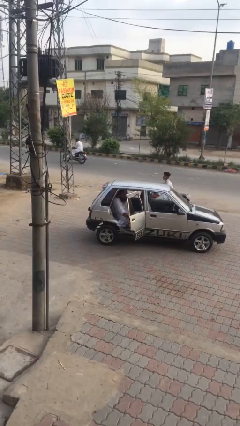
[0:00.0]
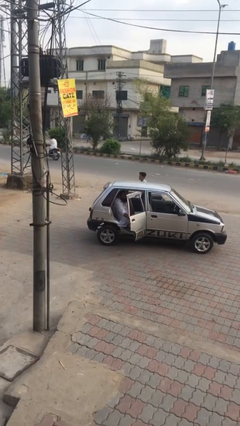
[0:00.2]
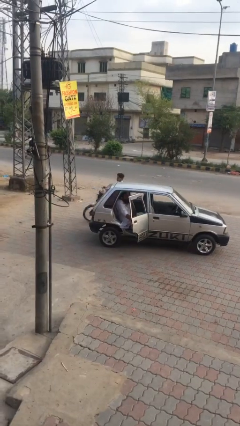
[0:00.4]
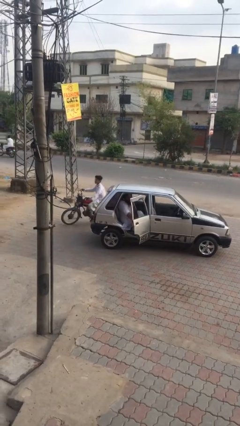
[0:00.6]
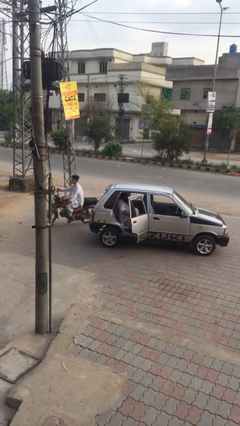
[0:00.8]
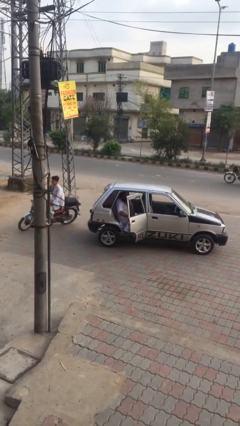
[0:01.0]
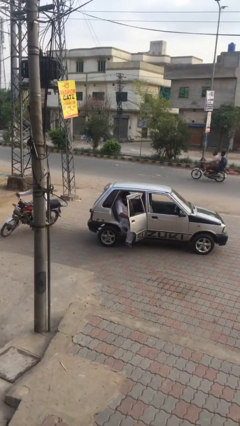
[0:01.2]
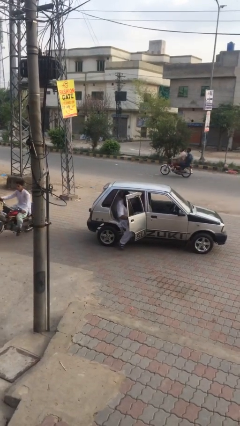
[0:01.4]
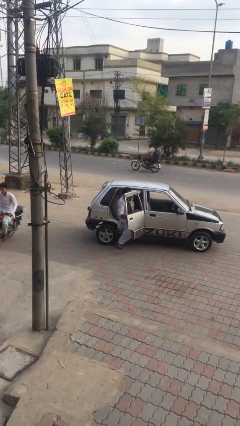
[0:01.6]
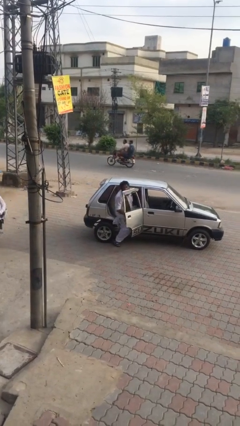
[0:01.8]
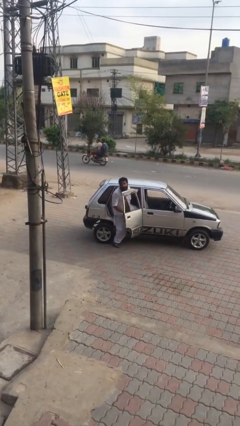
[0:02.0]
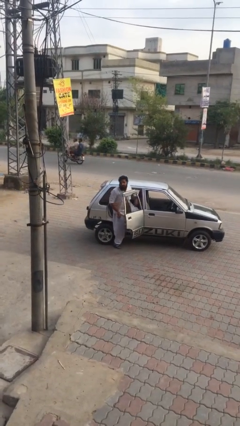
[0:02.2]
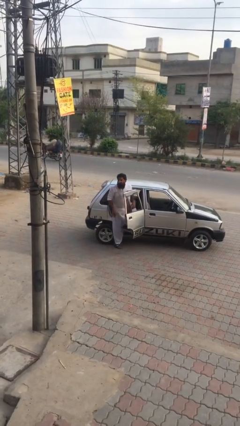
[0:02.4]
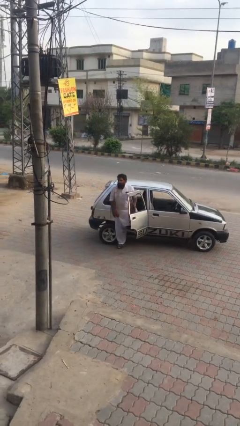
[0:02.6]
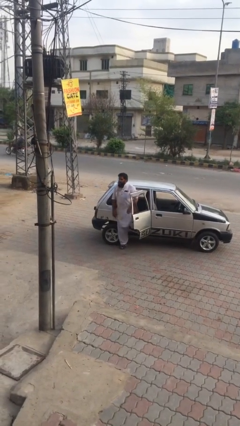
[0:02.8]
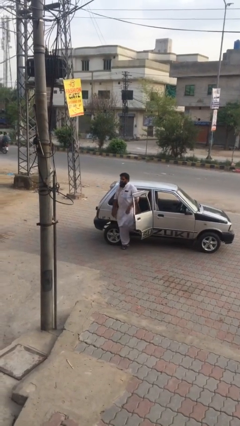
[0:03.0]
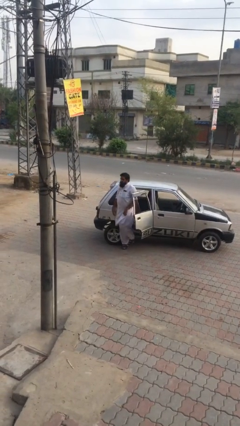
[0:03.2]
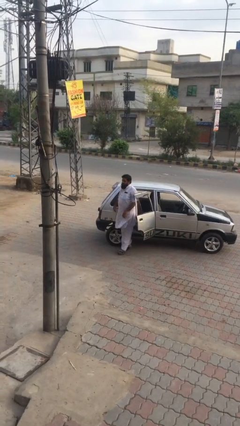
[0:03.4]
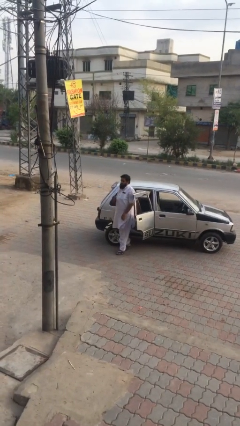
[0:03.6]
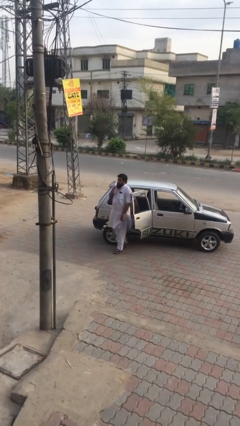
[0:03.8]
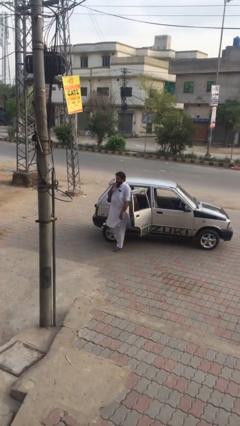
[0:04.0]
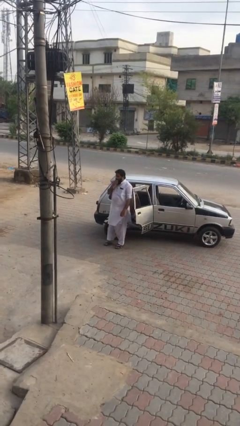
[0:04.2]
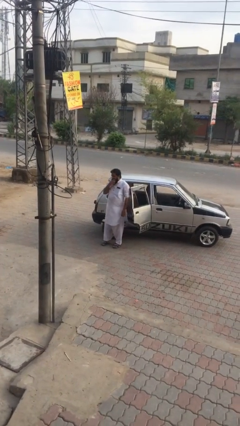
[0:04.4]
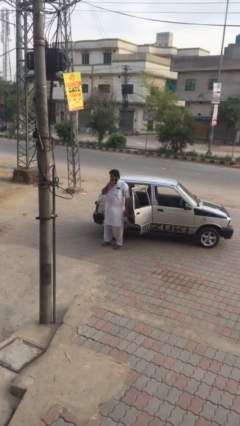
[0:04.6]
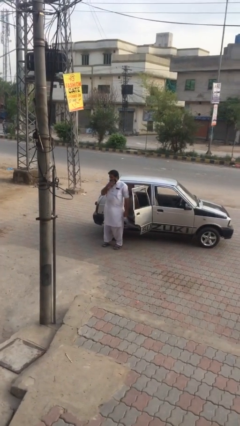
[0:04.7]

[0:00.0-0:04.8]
person exits car

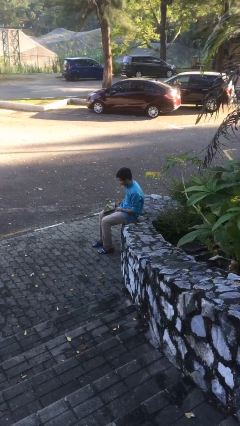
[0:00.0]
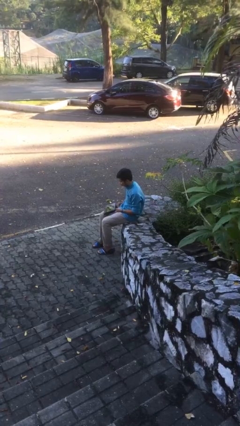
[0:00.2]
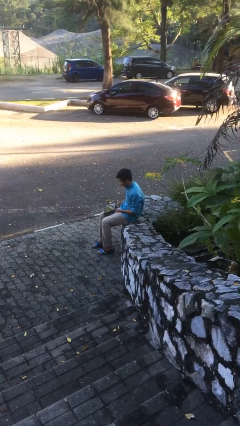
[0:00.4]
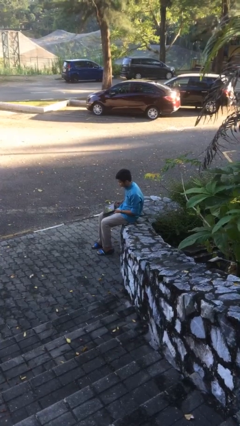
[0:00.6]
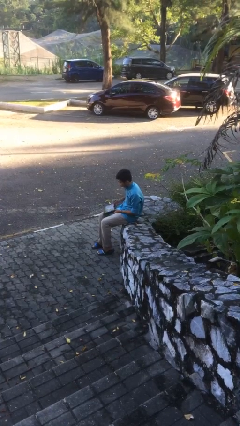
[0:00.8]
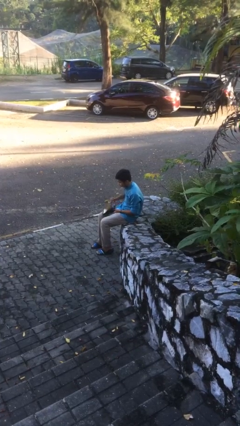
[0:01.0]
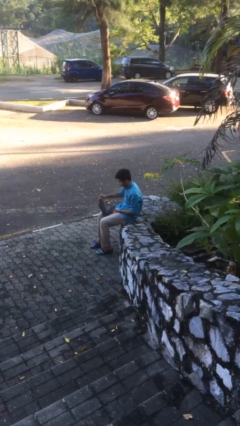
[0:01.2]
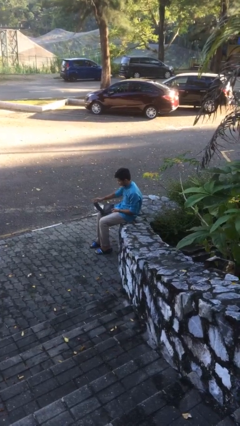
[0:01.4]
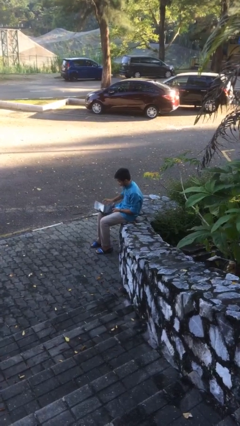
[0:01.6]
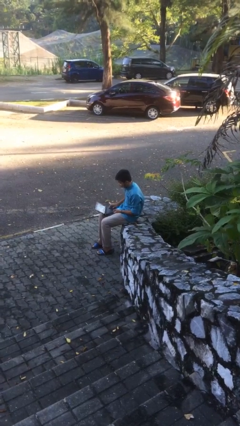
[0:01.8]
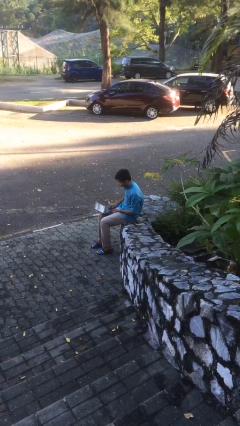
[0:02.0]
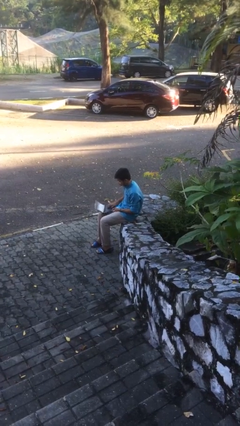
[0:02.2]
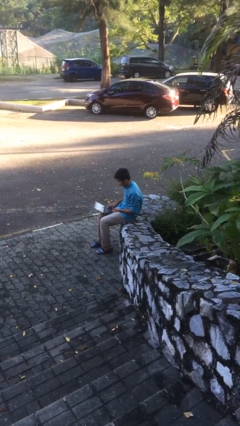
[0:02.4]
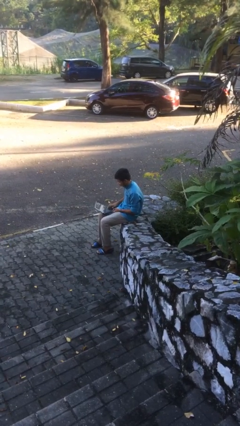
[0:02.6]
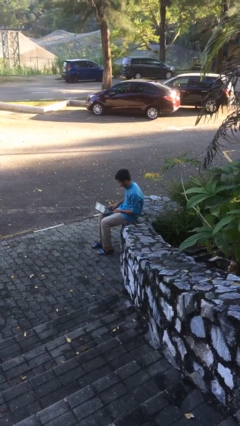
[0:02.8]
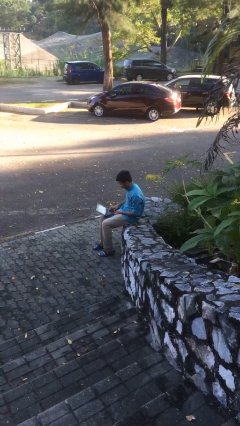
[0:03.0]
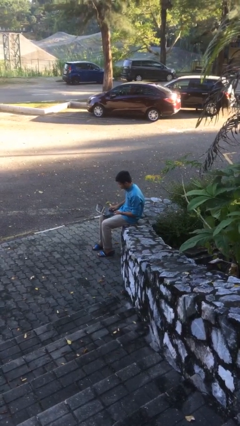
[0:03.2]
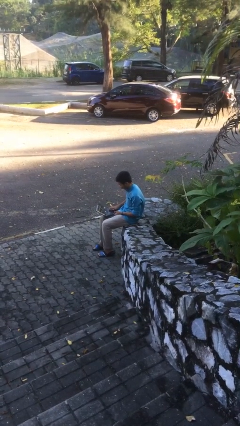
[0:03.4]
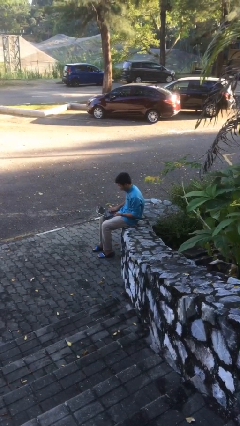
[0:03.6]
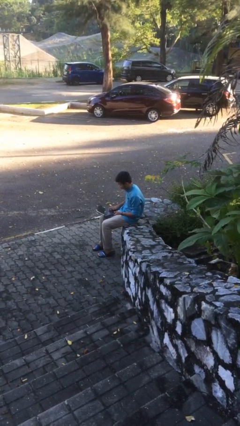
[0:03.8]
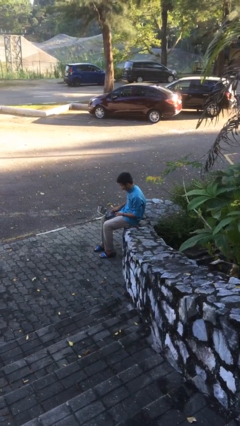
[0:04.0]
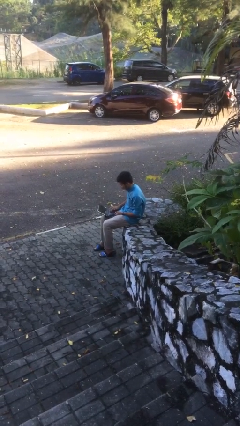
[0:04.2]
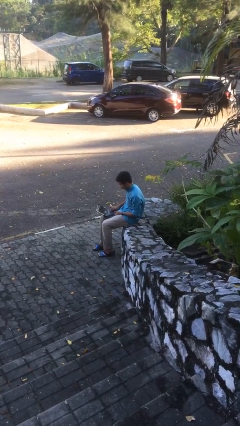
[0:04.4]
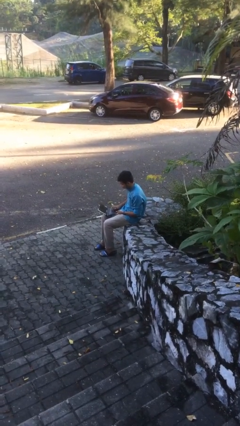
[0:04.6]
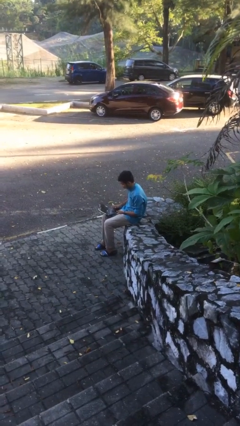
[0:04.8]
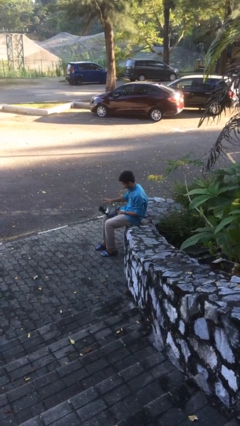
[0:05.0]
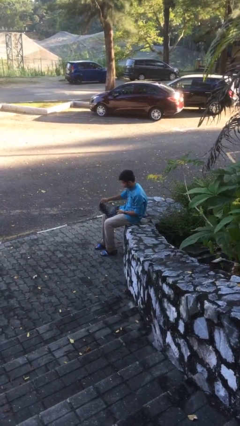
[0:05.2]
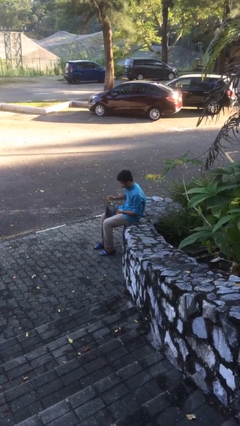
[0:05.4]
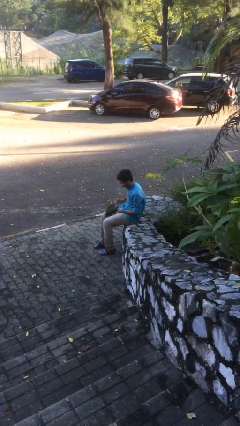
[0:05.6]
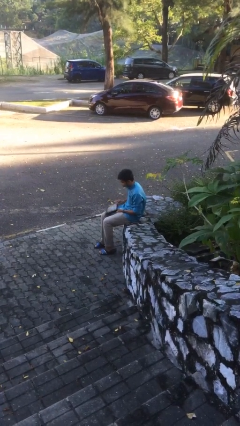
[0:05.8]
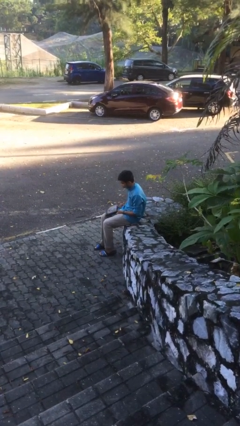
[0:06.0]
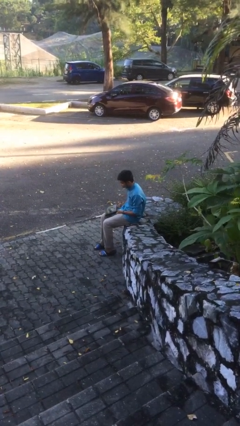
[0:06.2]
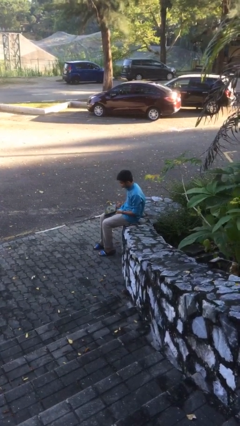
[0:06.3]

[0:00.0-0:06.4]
person interacts with laptop

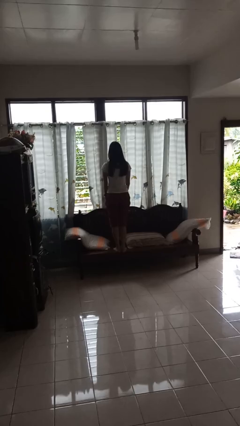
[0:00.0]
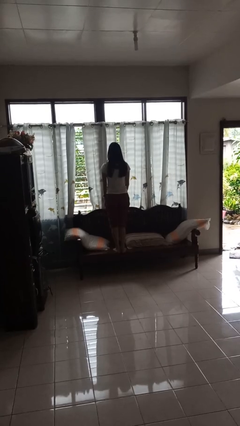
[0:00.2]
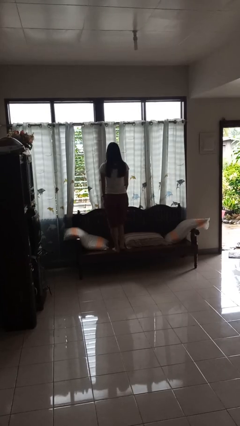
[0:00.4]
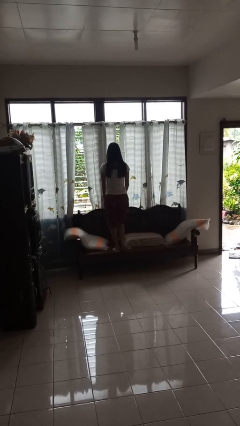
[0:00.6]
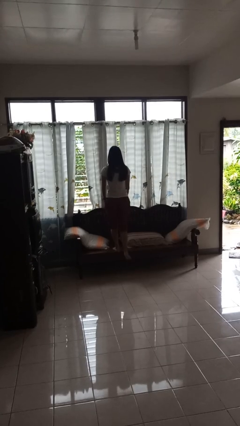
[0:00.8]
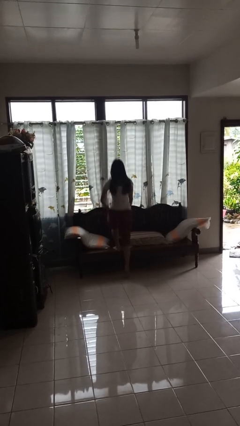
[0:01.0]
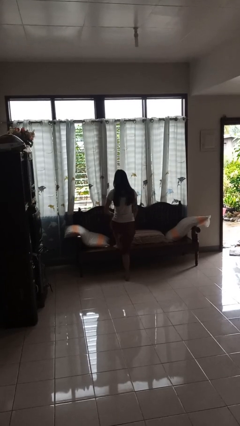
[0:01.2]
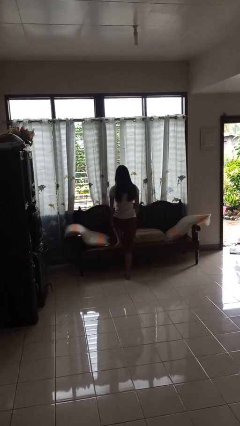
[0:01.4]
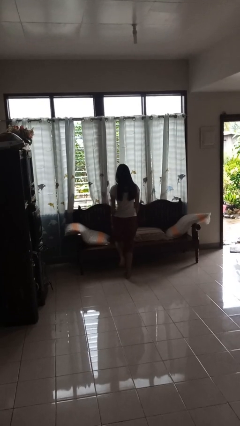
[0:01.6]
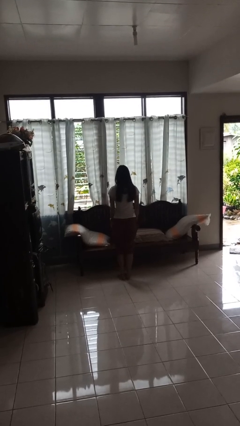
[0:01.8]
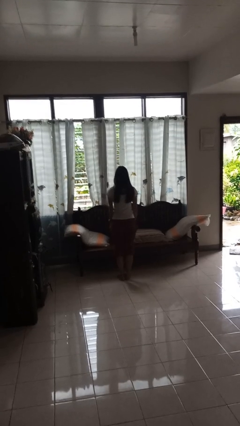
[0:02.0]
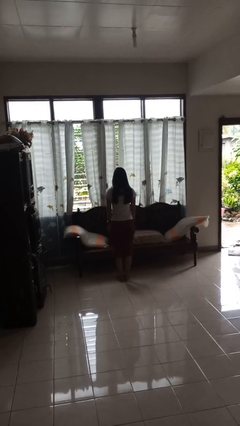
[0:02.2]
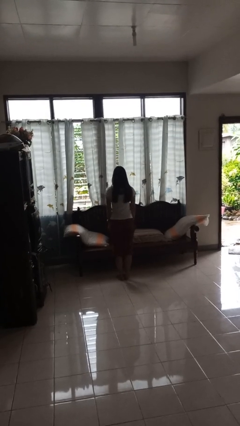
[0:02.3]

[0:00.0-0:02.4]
person climbs off couch

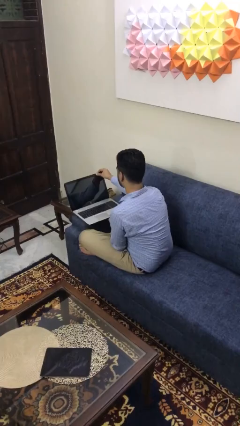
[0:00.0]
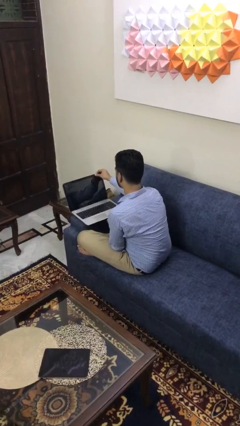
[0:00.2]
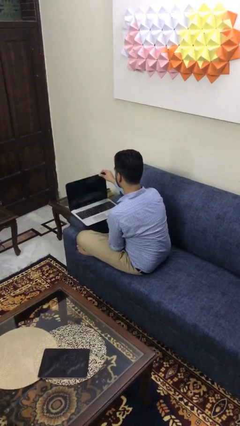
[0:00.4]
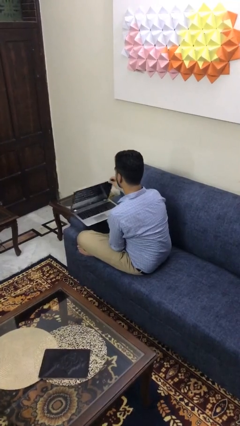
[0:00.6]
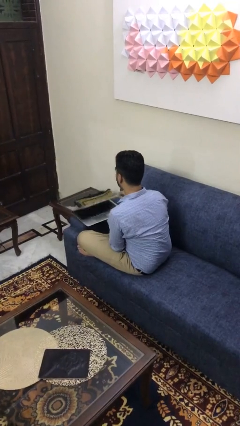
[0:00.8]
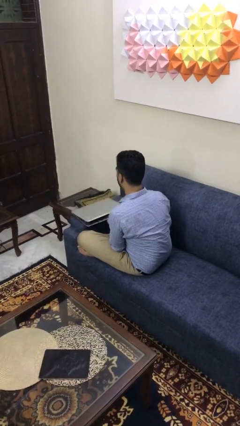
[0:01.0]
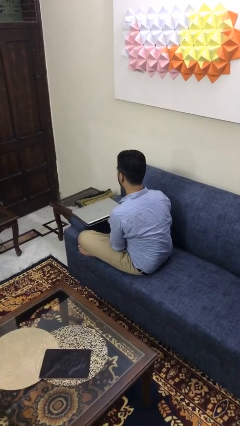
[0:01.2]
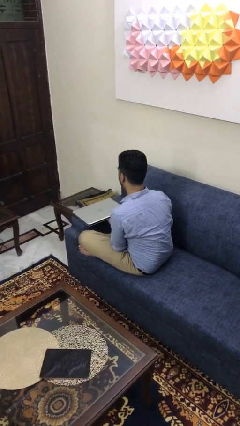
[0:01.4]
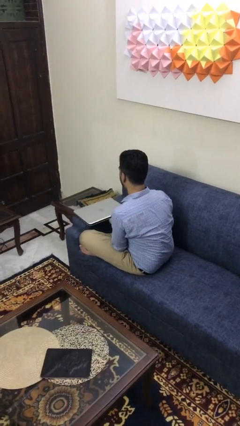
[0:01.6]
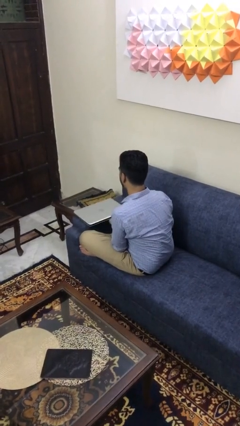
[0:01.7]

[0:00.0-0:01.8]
person closes laptop

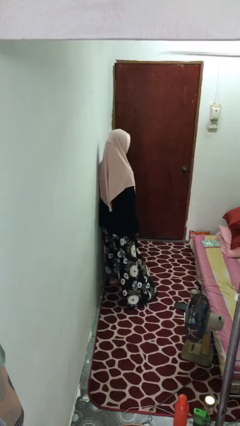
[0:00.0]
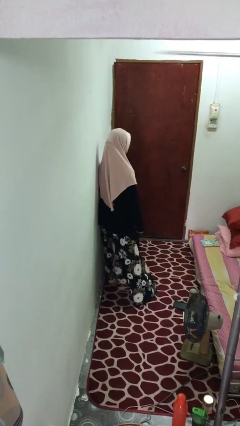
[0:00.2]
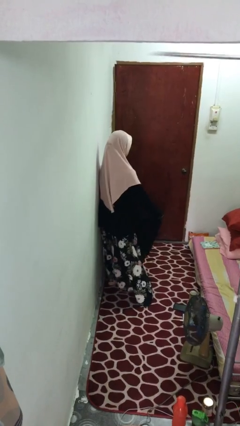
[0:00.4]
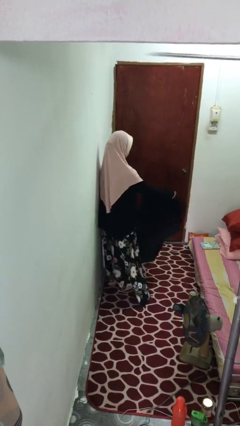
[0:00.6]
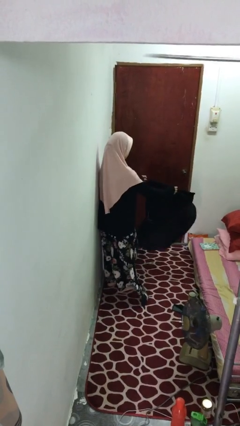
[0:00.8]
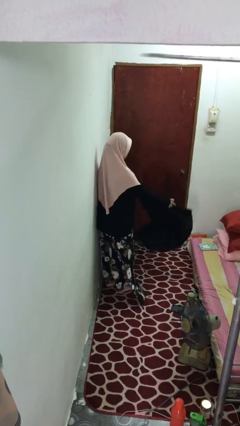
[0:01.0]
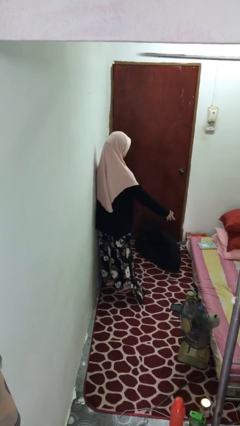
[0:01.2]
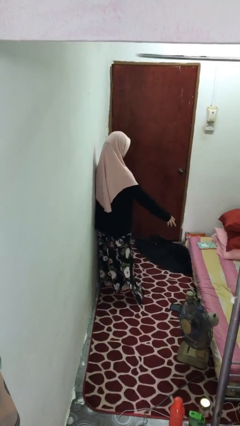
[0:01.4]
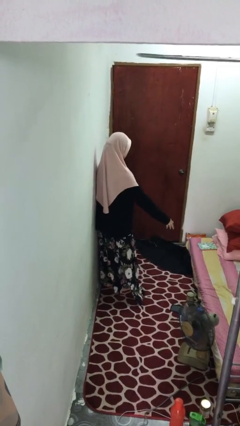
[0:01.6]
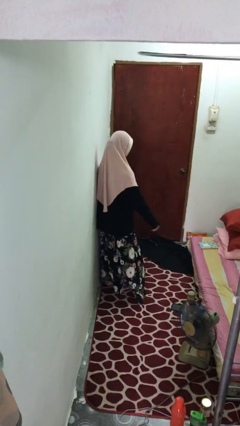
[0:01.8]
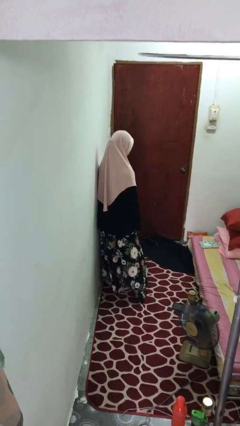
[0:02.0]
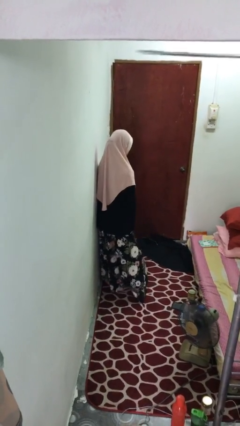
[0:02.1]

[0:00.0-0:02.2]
person throws object to ground
